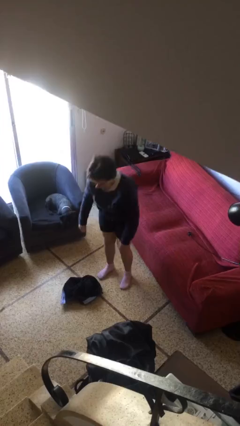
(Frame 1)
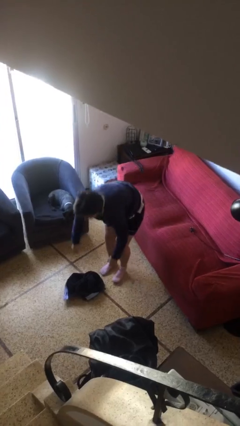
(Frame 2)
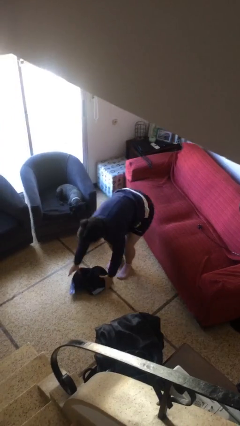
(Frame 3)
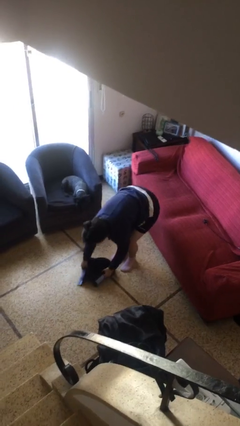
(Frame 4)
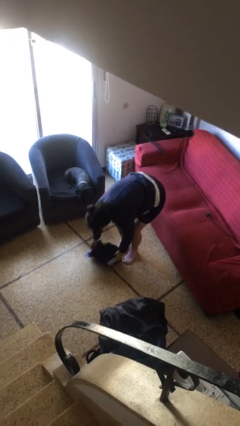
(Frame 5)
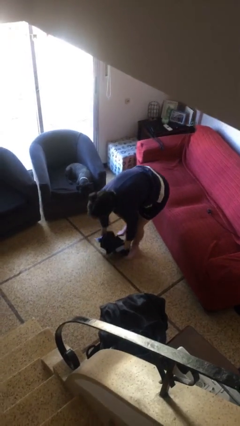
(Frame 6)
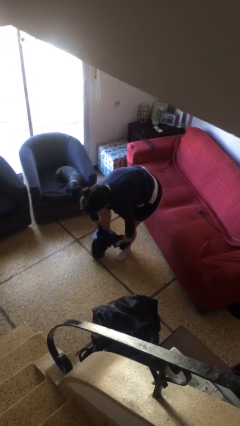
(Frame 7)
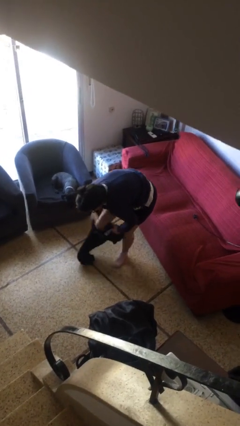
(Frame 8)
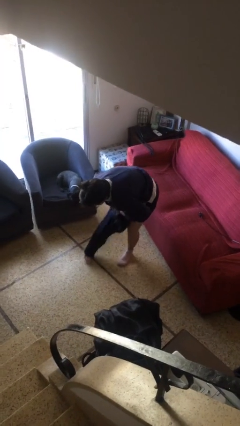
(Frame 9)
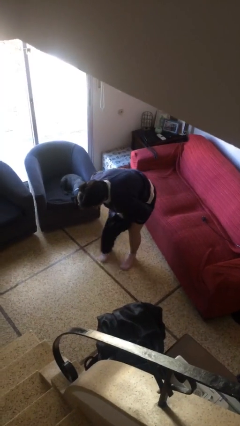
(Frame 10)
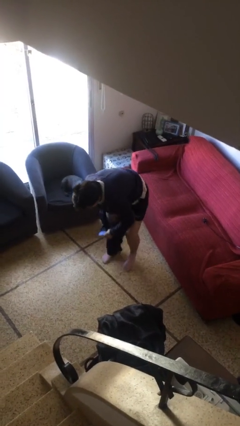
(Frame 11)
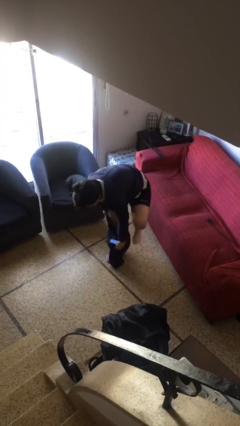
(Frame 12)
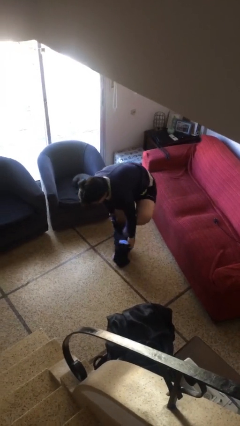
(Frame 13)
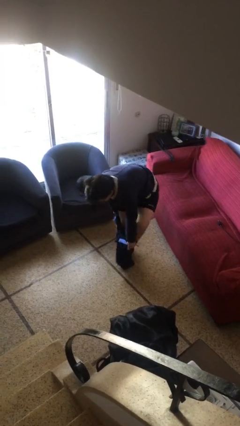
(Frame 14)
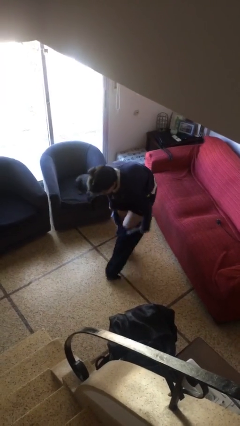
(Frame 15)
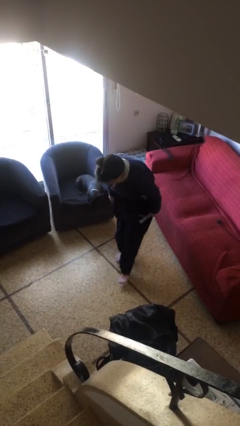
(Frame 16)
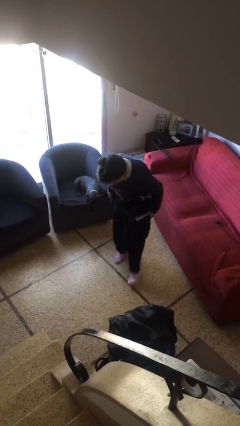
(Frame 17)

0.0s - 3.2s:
person puts on pants

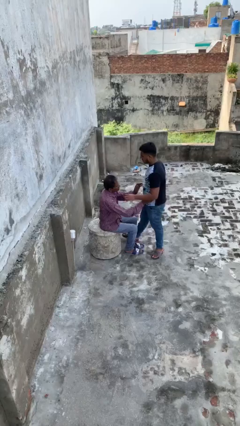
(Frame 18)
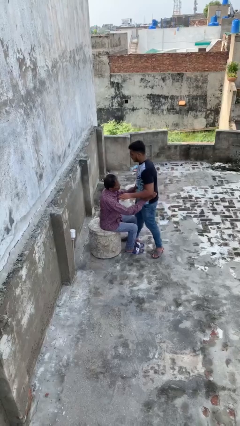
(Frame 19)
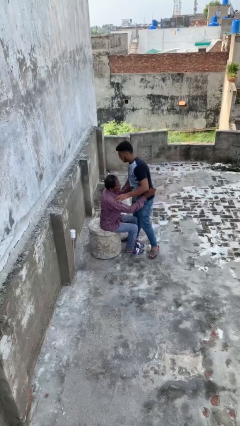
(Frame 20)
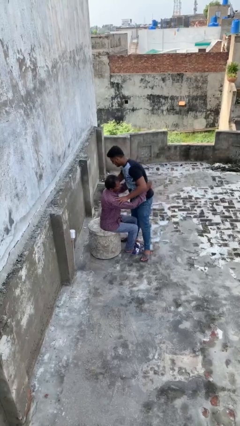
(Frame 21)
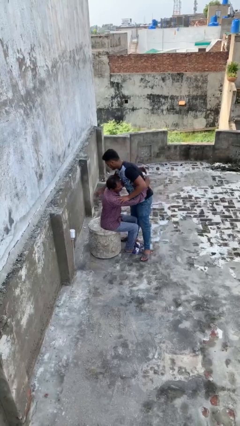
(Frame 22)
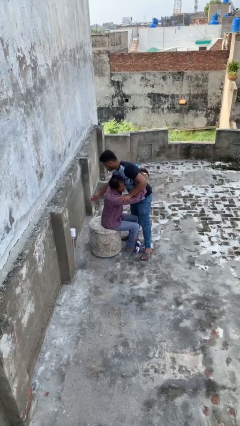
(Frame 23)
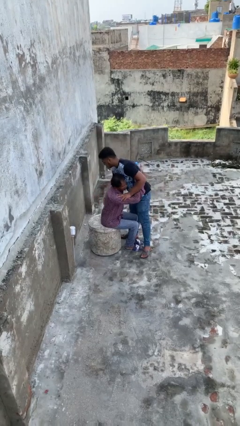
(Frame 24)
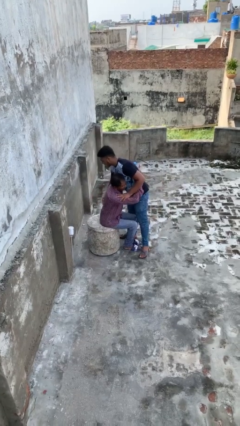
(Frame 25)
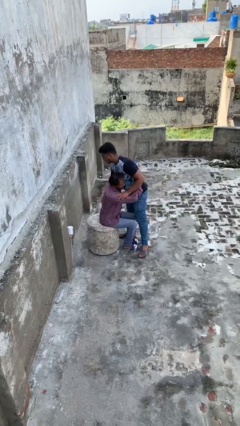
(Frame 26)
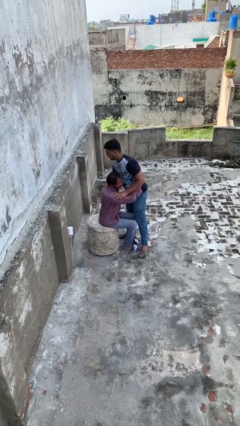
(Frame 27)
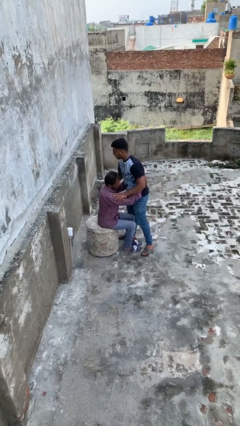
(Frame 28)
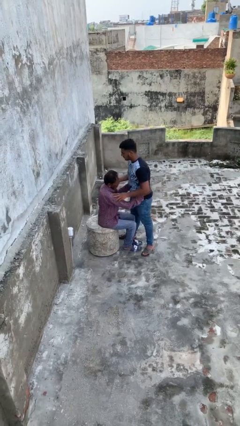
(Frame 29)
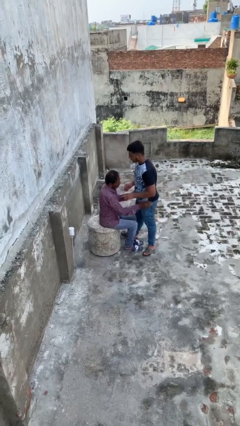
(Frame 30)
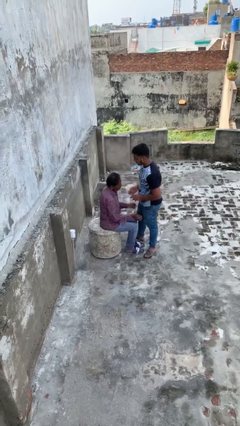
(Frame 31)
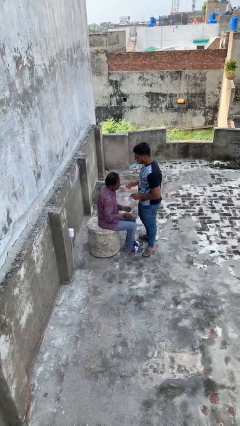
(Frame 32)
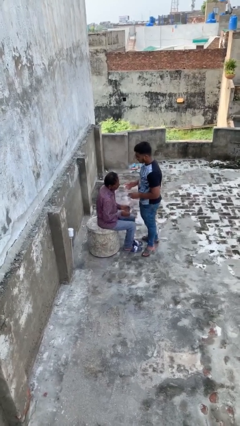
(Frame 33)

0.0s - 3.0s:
person embraces person

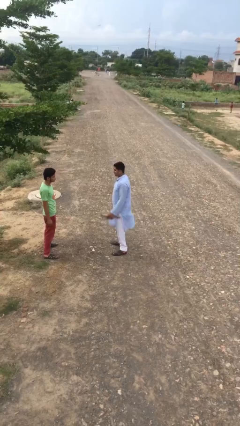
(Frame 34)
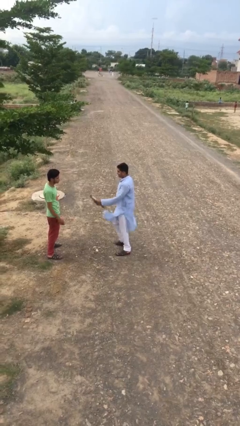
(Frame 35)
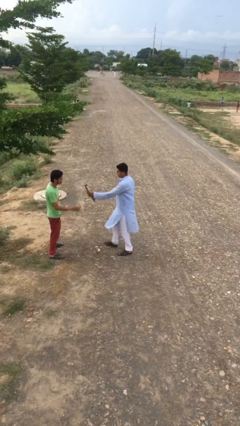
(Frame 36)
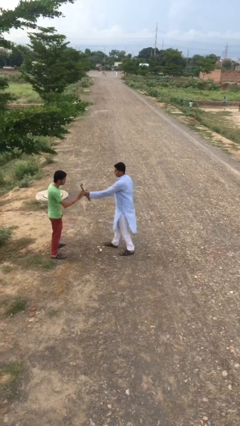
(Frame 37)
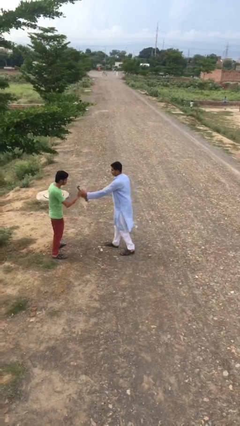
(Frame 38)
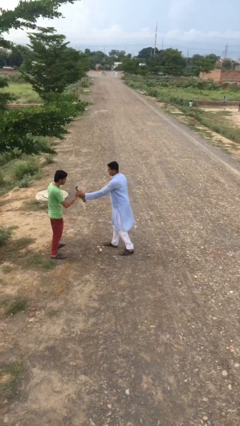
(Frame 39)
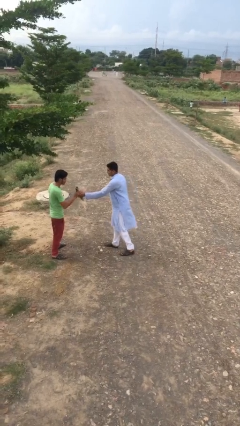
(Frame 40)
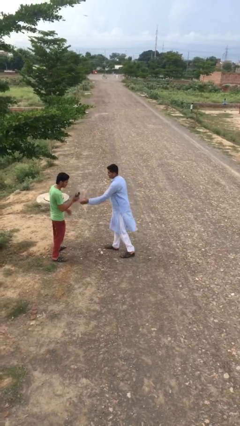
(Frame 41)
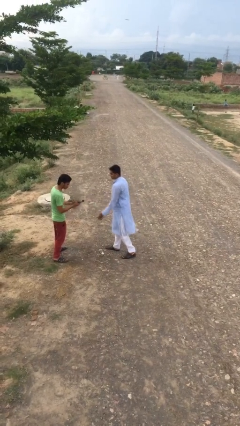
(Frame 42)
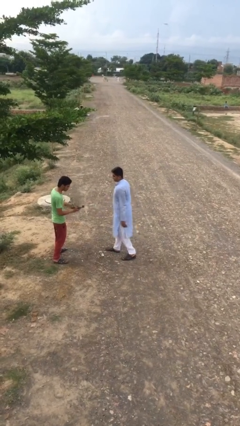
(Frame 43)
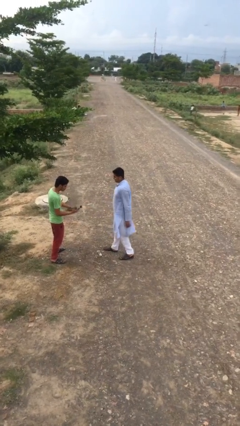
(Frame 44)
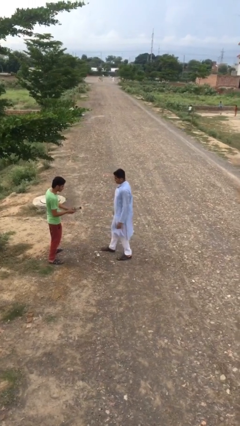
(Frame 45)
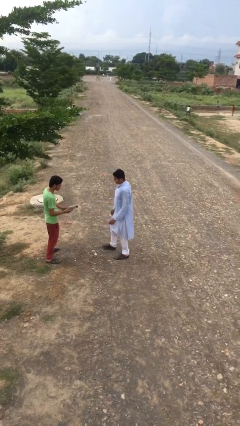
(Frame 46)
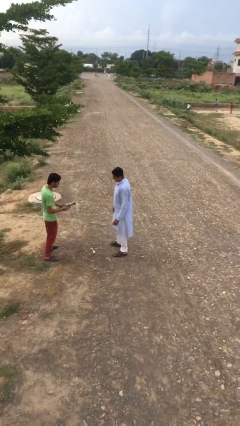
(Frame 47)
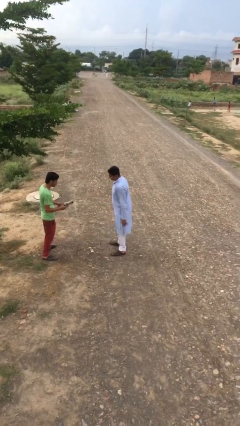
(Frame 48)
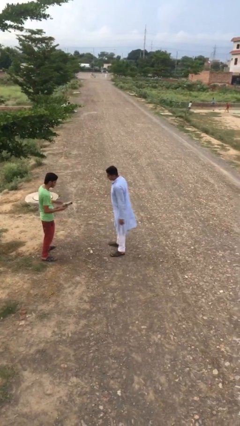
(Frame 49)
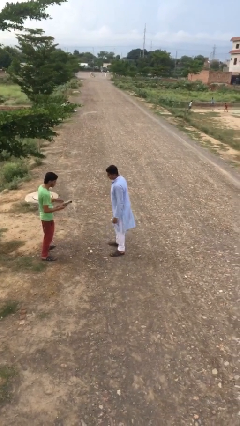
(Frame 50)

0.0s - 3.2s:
person transfers object to person

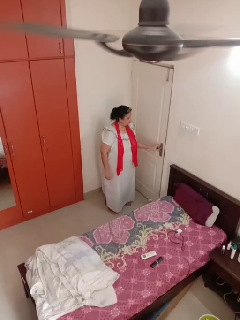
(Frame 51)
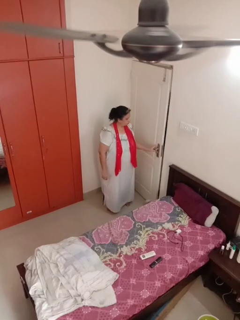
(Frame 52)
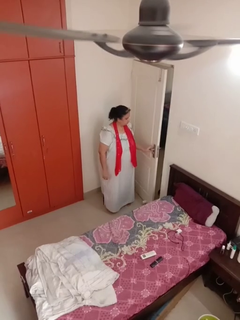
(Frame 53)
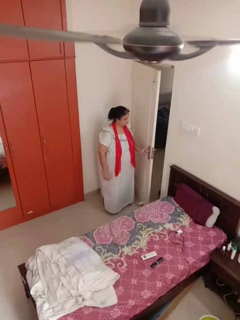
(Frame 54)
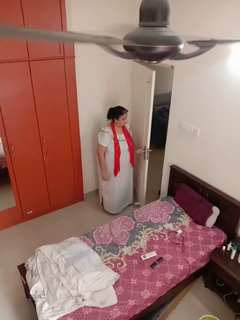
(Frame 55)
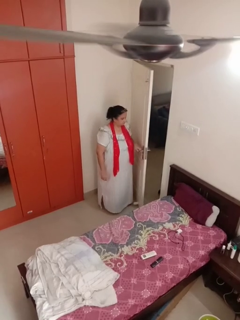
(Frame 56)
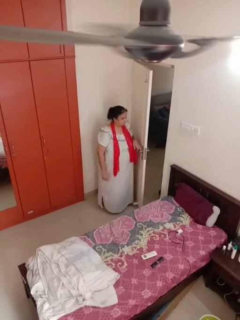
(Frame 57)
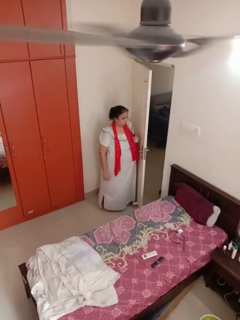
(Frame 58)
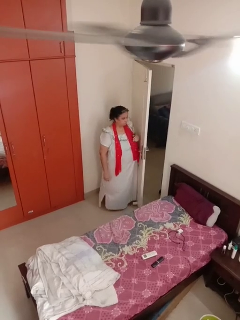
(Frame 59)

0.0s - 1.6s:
person opens facility door

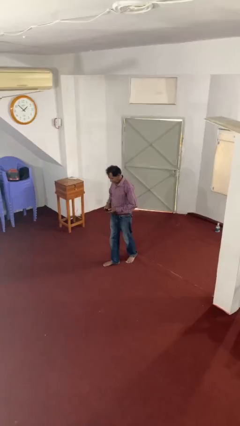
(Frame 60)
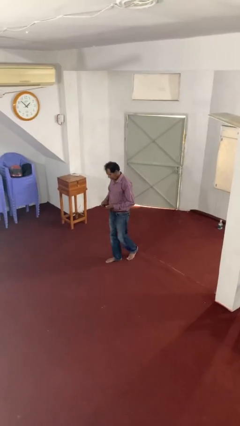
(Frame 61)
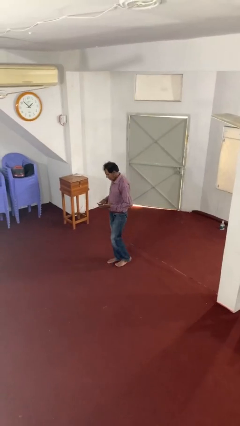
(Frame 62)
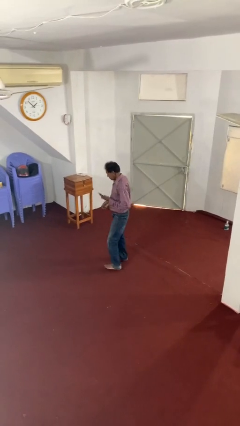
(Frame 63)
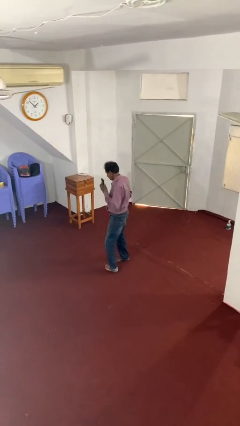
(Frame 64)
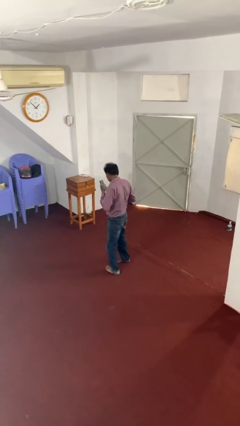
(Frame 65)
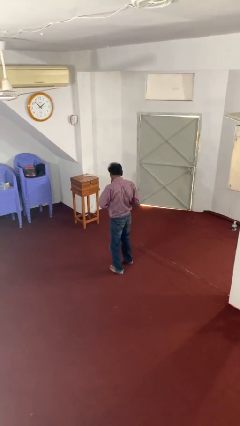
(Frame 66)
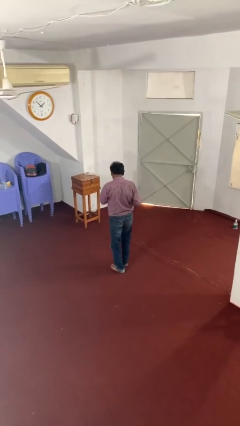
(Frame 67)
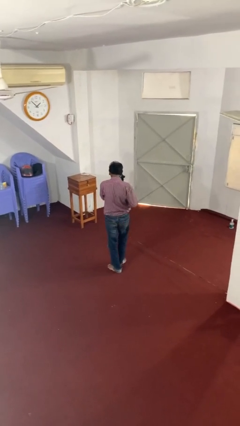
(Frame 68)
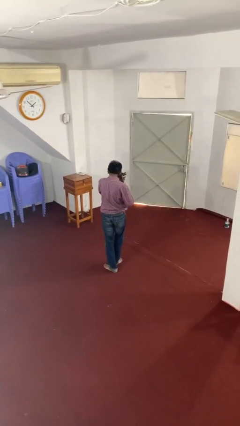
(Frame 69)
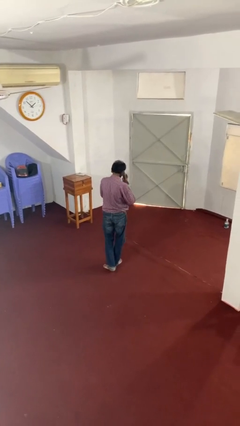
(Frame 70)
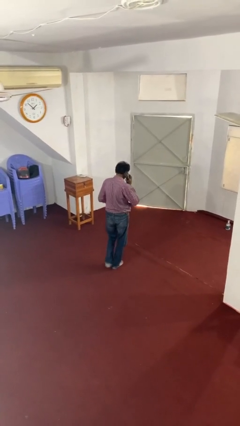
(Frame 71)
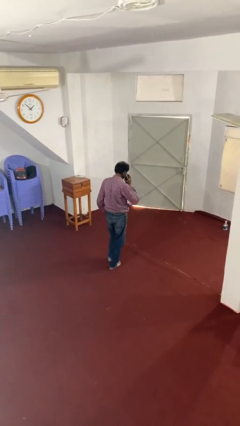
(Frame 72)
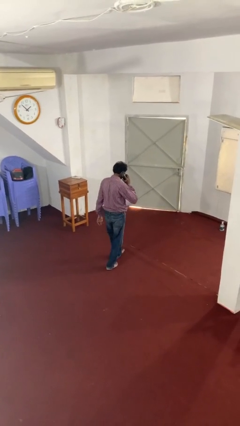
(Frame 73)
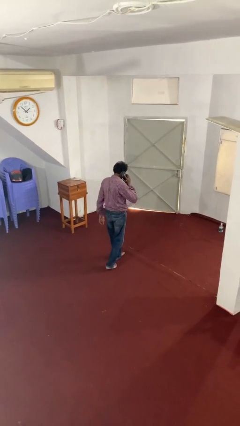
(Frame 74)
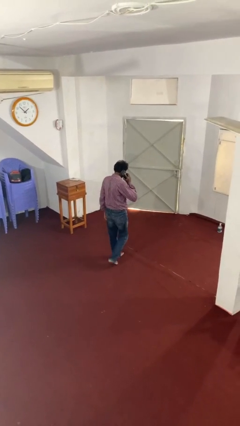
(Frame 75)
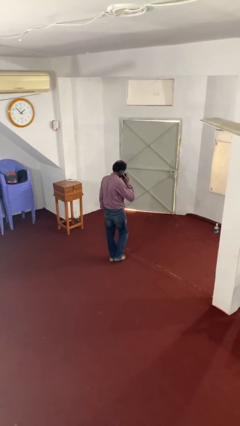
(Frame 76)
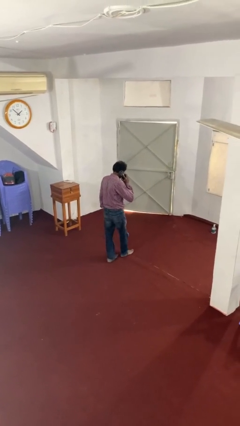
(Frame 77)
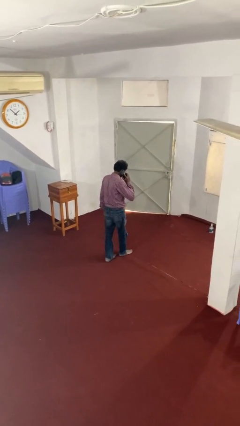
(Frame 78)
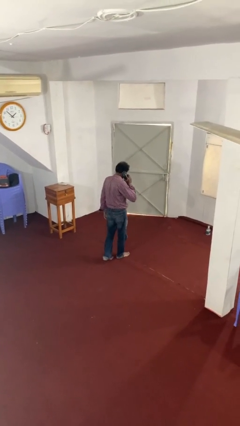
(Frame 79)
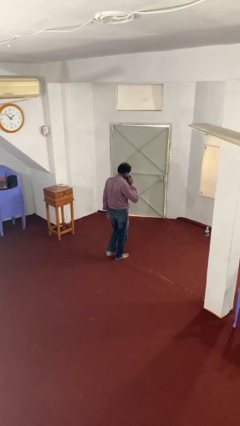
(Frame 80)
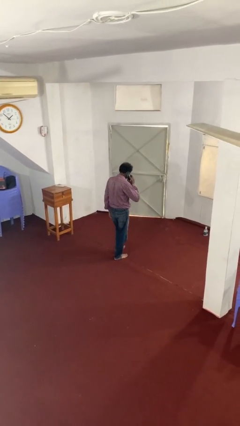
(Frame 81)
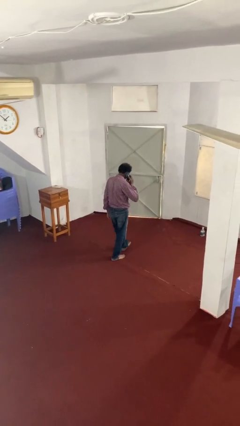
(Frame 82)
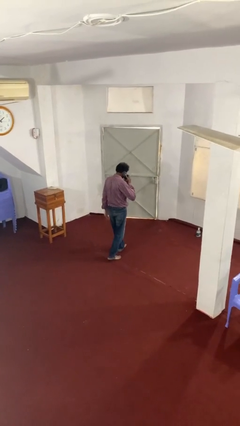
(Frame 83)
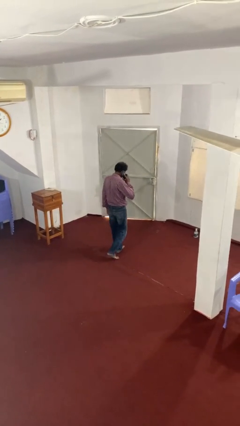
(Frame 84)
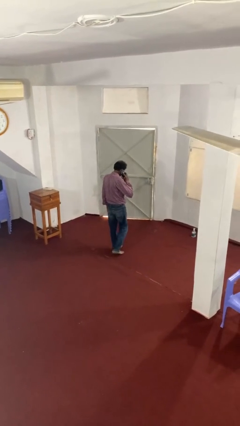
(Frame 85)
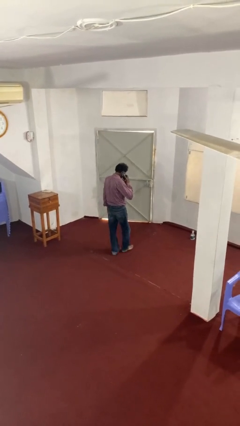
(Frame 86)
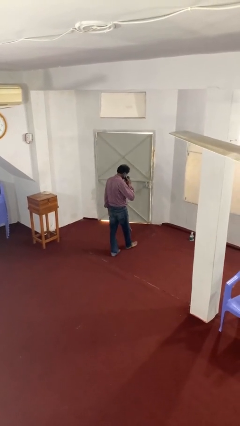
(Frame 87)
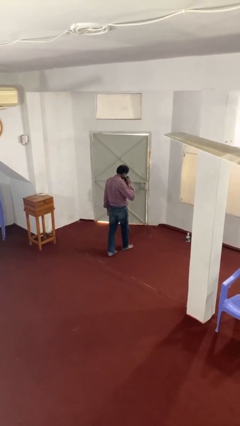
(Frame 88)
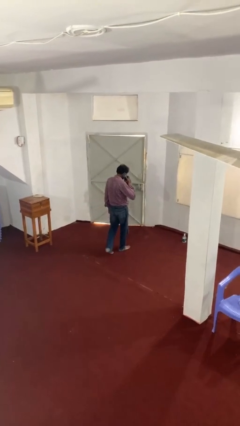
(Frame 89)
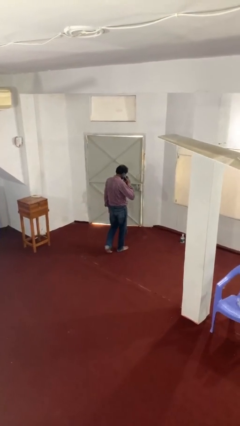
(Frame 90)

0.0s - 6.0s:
person talks on phone

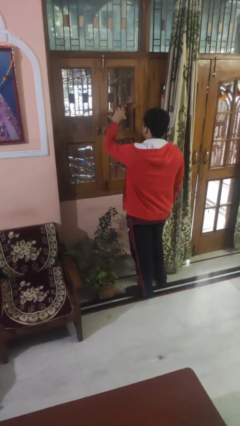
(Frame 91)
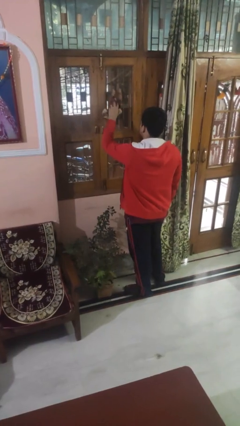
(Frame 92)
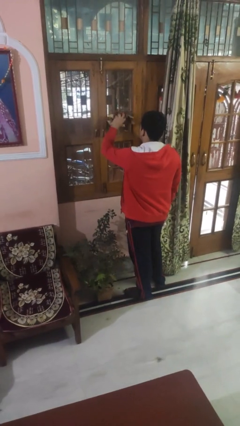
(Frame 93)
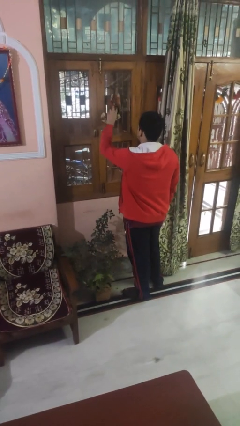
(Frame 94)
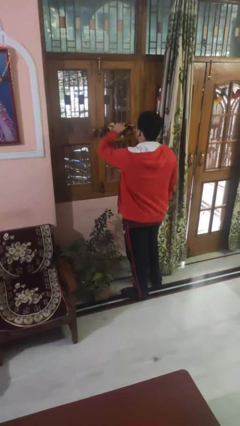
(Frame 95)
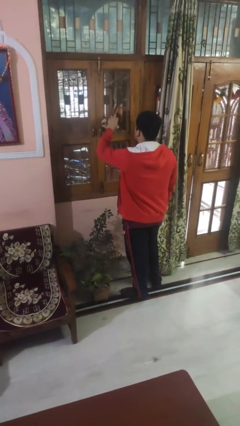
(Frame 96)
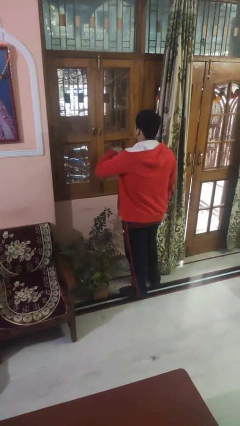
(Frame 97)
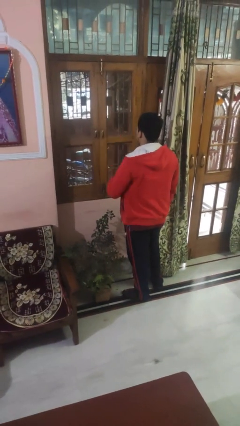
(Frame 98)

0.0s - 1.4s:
person washes window
